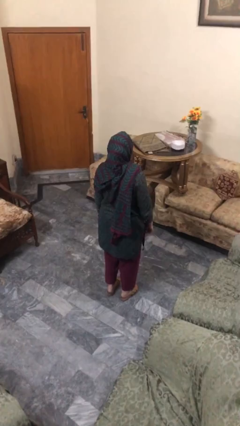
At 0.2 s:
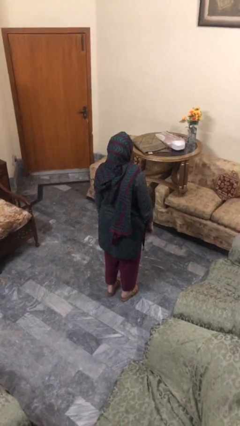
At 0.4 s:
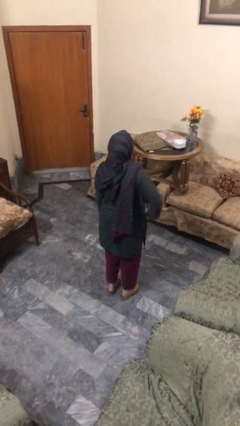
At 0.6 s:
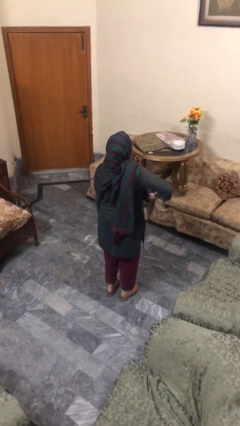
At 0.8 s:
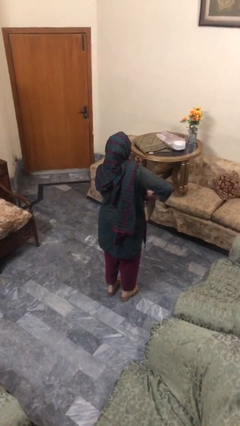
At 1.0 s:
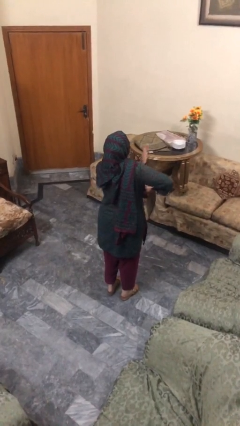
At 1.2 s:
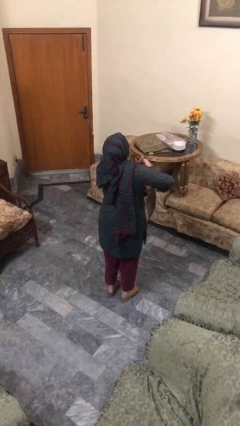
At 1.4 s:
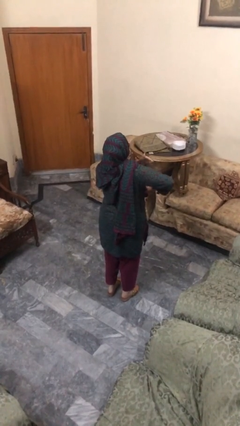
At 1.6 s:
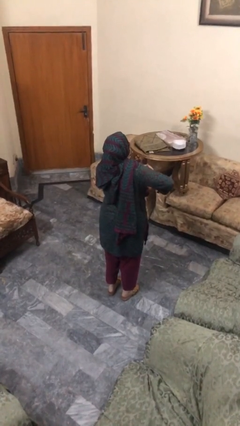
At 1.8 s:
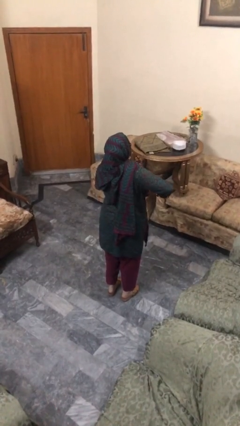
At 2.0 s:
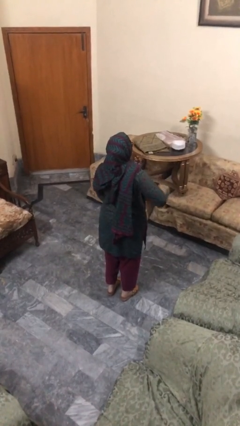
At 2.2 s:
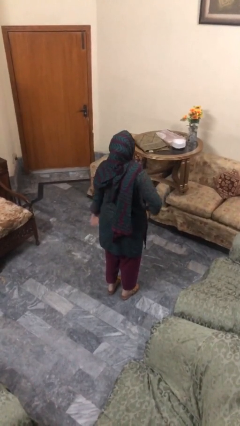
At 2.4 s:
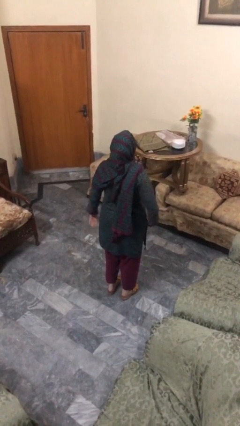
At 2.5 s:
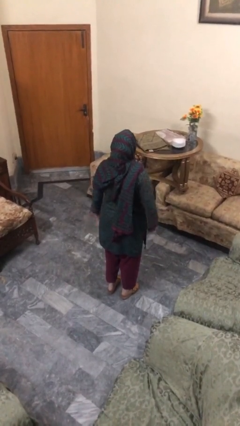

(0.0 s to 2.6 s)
person swats bug

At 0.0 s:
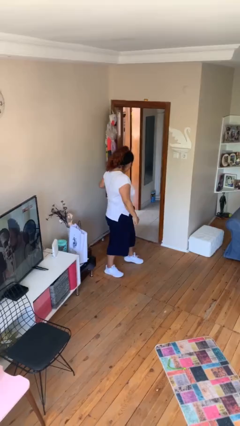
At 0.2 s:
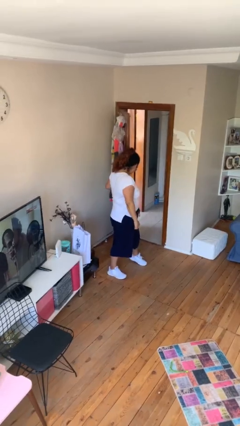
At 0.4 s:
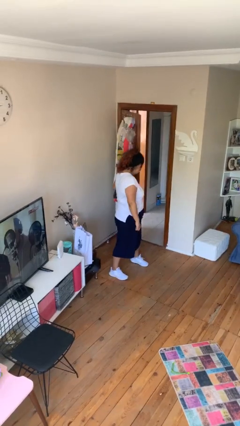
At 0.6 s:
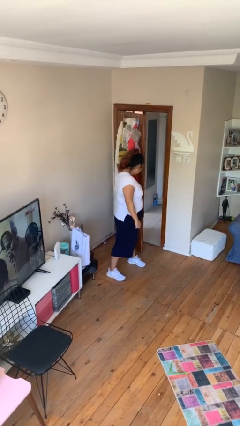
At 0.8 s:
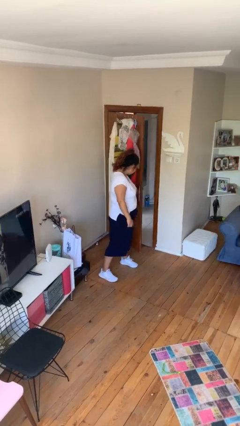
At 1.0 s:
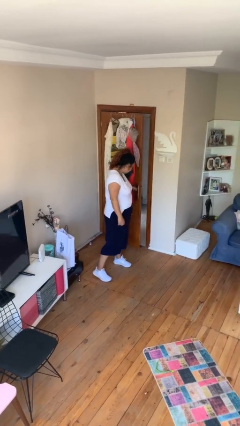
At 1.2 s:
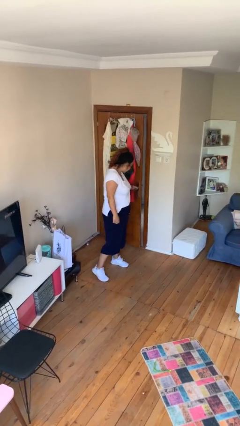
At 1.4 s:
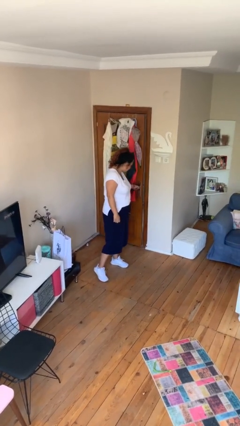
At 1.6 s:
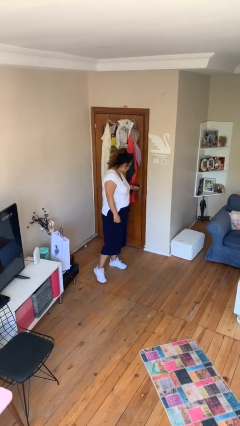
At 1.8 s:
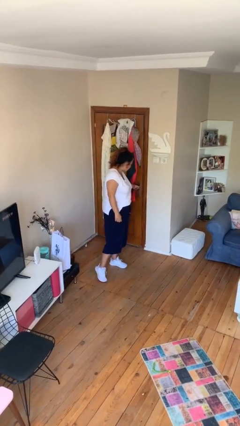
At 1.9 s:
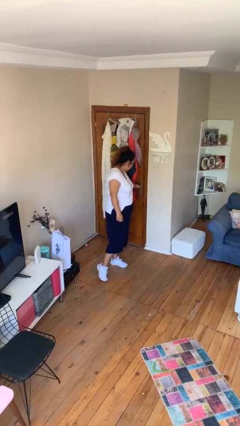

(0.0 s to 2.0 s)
person closes facility door

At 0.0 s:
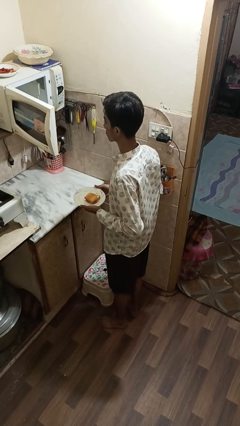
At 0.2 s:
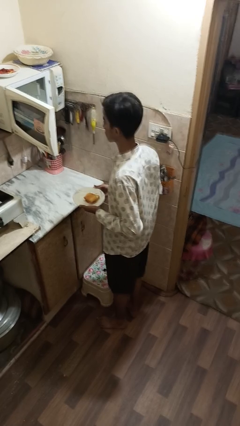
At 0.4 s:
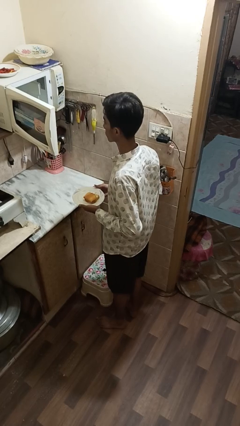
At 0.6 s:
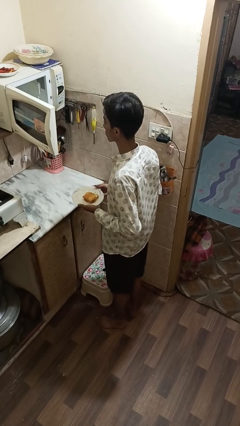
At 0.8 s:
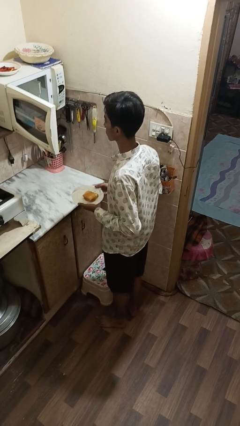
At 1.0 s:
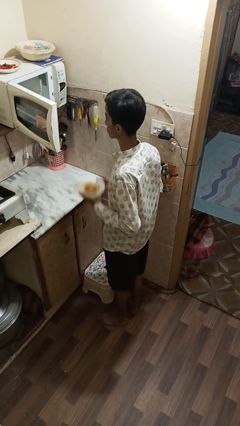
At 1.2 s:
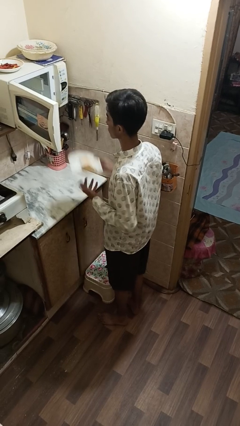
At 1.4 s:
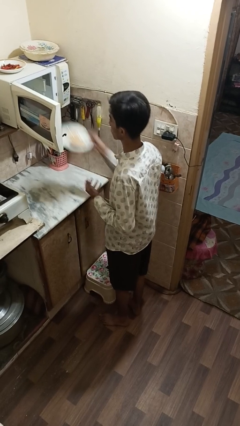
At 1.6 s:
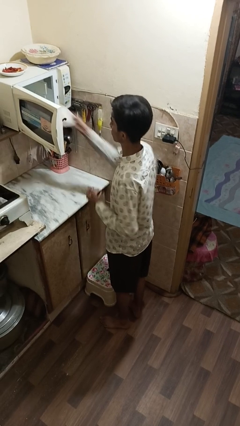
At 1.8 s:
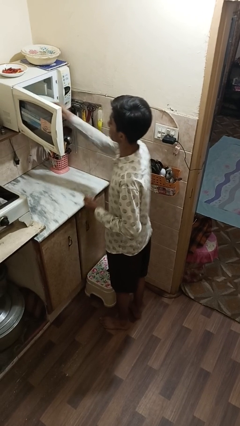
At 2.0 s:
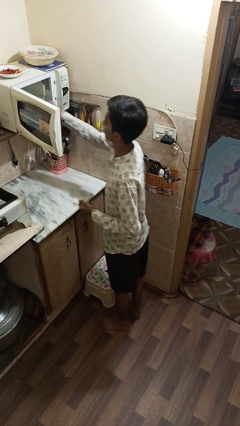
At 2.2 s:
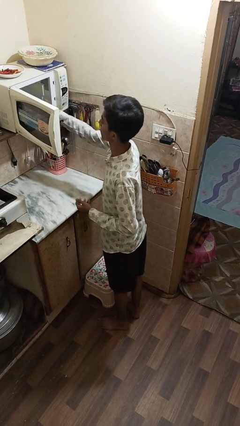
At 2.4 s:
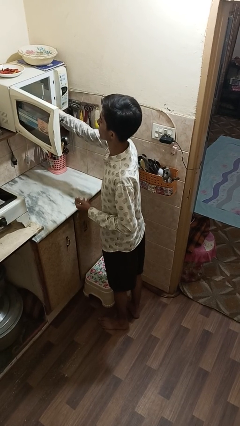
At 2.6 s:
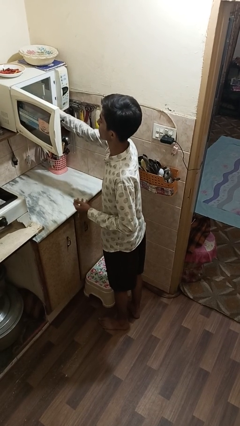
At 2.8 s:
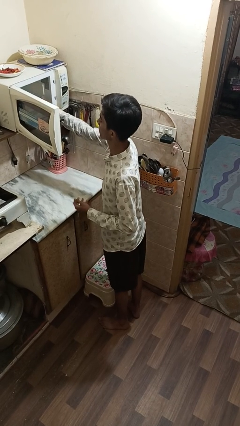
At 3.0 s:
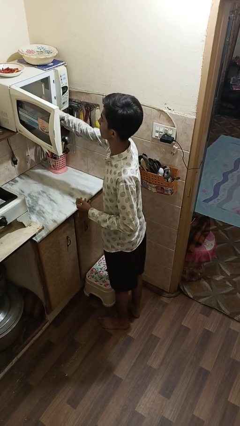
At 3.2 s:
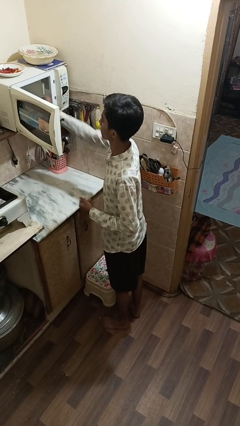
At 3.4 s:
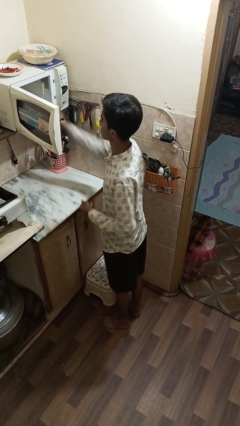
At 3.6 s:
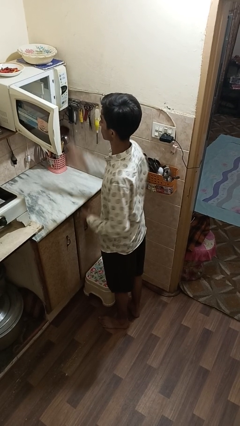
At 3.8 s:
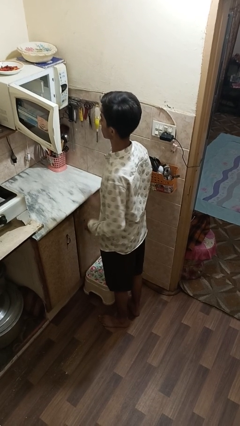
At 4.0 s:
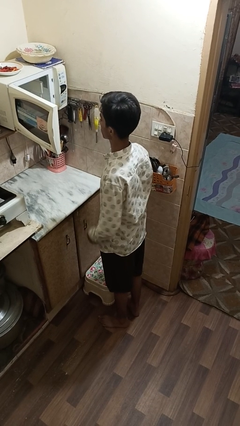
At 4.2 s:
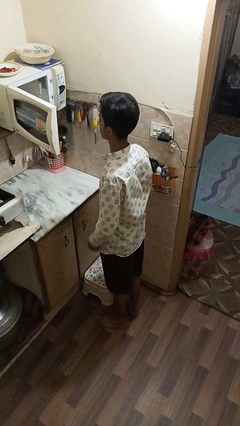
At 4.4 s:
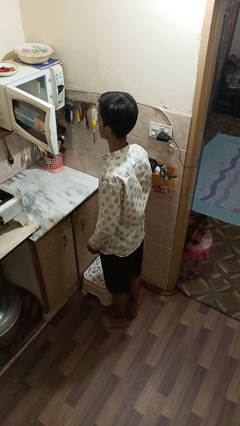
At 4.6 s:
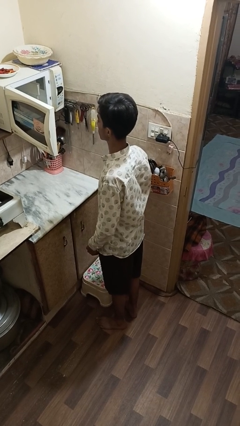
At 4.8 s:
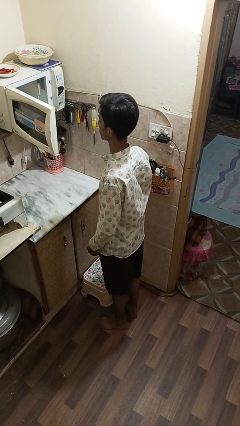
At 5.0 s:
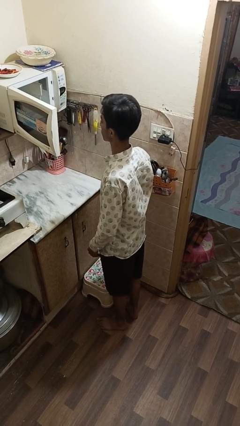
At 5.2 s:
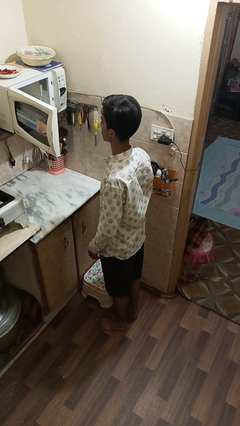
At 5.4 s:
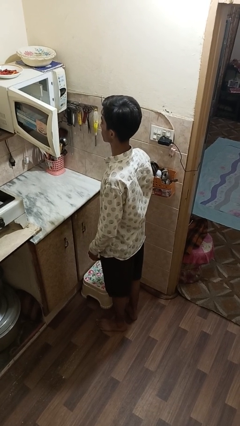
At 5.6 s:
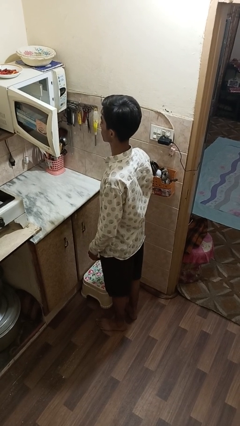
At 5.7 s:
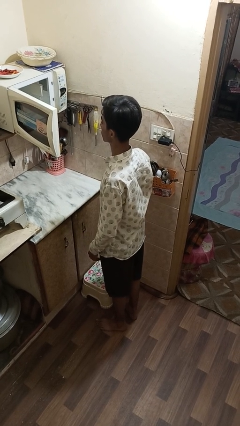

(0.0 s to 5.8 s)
person puts object into microwave

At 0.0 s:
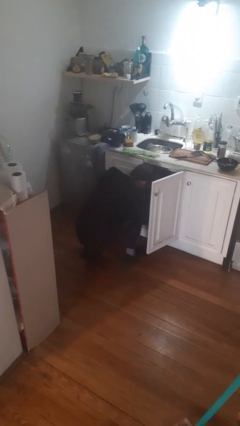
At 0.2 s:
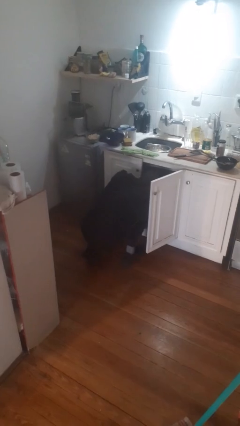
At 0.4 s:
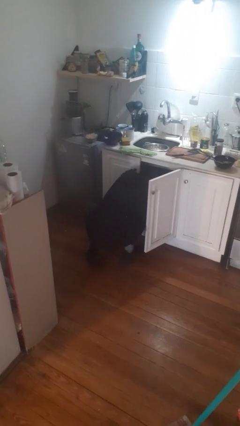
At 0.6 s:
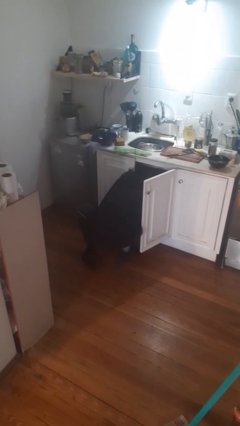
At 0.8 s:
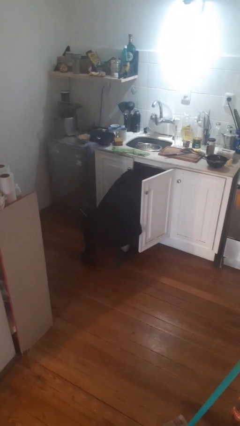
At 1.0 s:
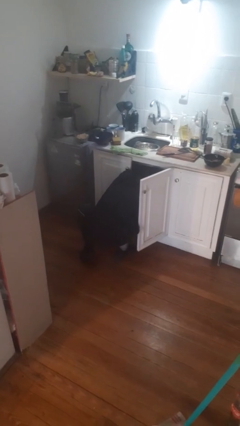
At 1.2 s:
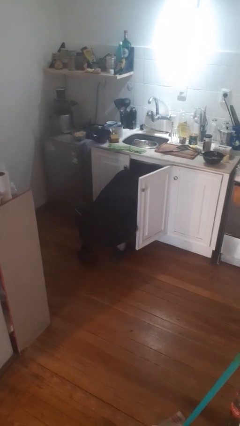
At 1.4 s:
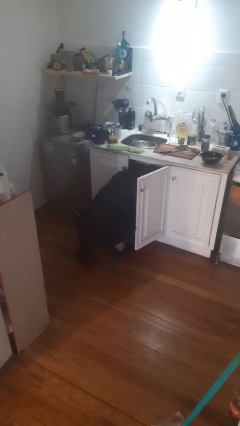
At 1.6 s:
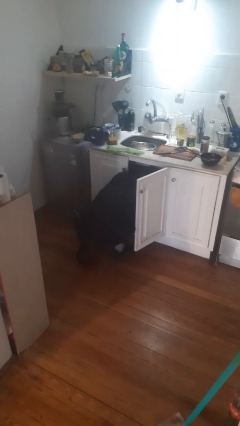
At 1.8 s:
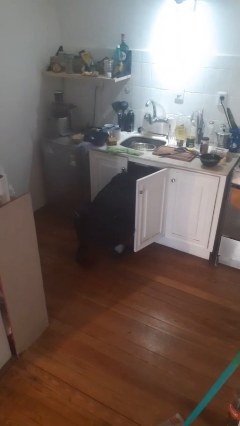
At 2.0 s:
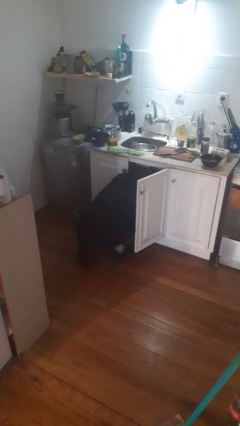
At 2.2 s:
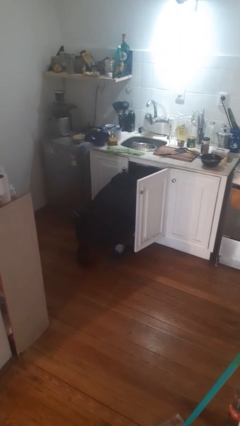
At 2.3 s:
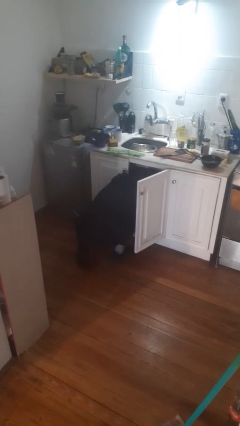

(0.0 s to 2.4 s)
person searches in cabinet

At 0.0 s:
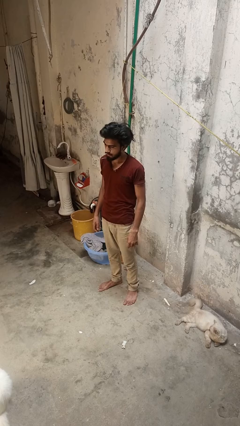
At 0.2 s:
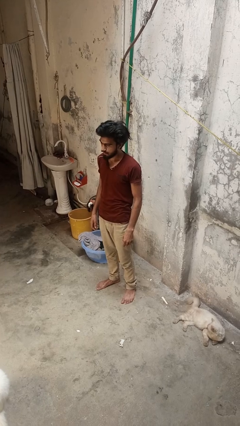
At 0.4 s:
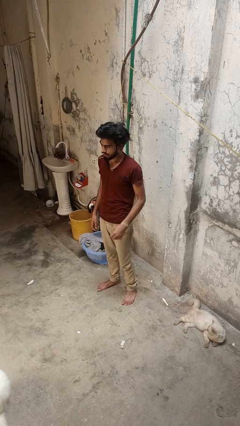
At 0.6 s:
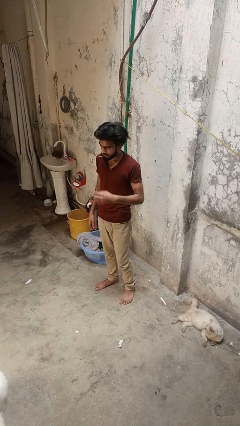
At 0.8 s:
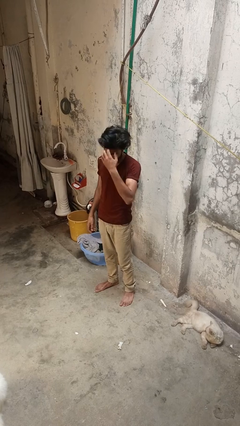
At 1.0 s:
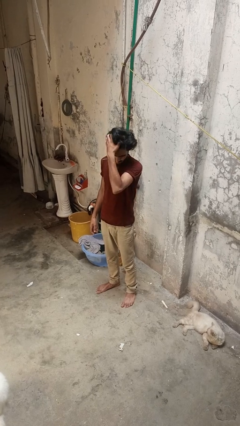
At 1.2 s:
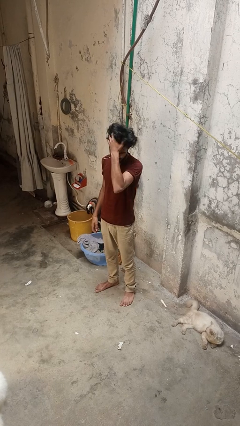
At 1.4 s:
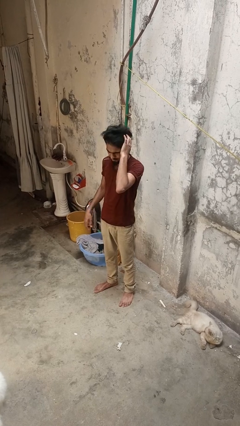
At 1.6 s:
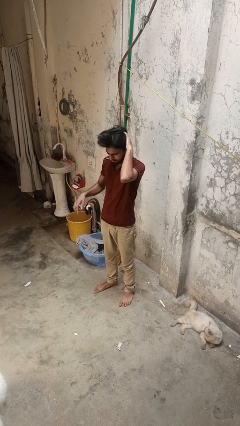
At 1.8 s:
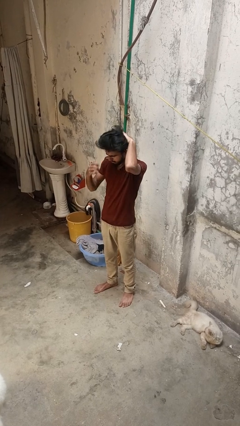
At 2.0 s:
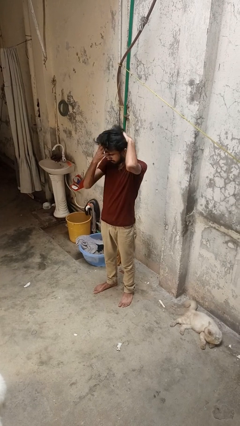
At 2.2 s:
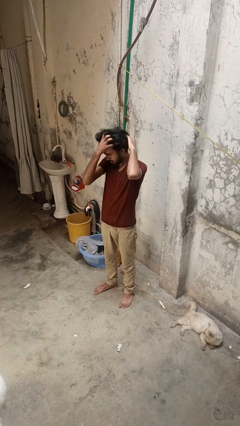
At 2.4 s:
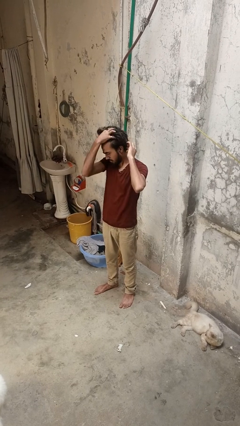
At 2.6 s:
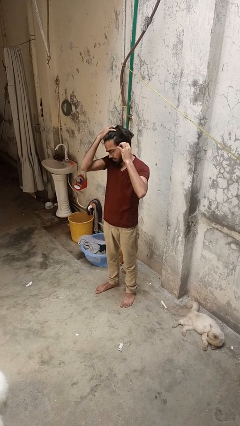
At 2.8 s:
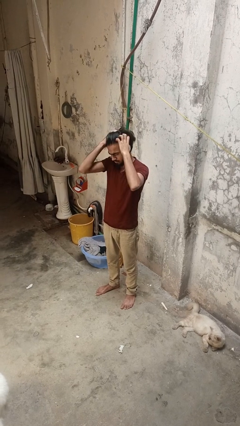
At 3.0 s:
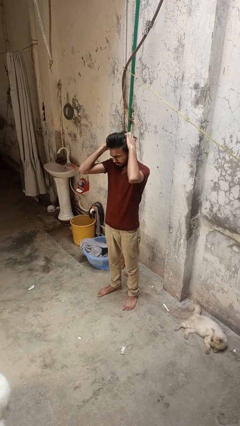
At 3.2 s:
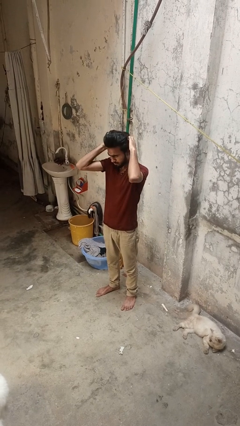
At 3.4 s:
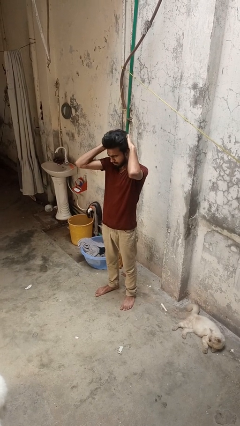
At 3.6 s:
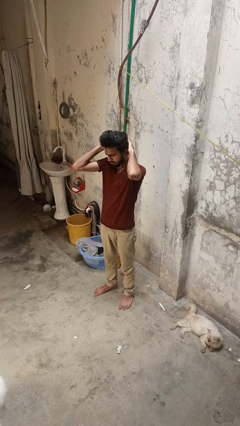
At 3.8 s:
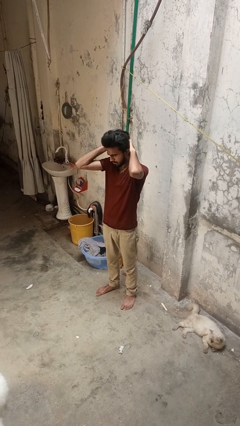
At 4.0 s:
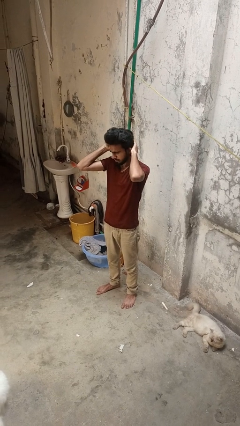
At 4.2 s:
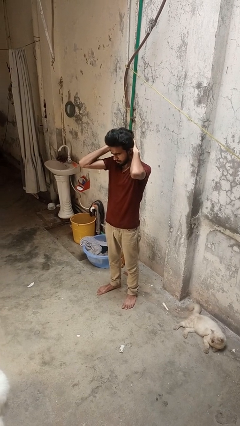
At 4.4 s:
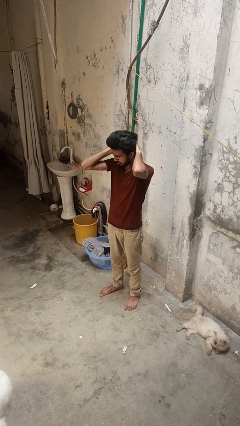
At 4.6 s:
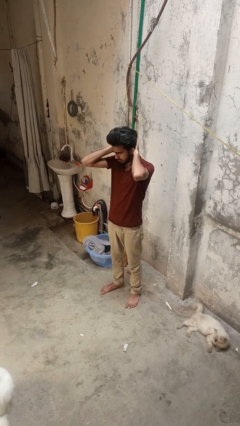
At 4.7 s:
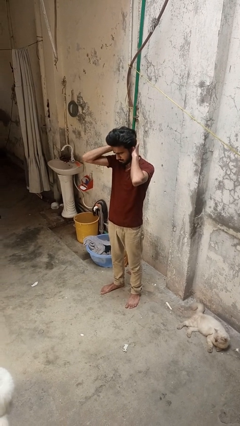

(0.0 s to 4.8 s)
person scratches face
